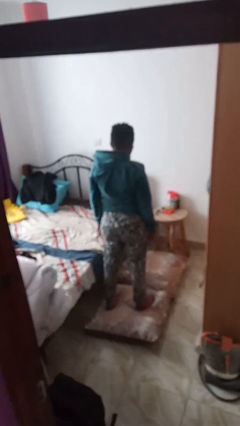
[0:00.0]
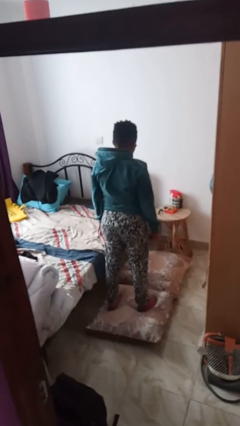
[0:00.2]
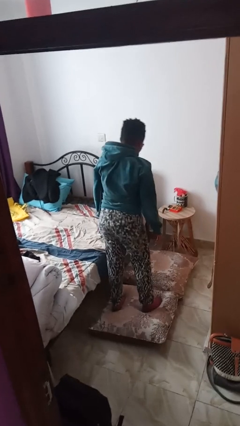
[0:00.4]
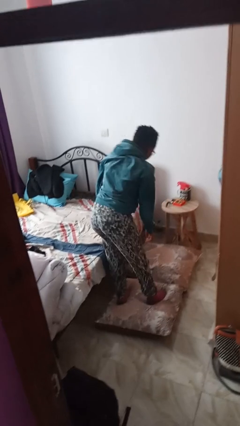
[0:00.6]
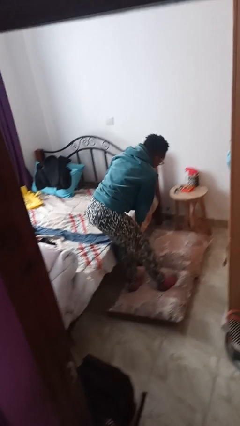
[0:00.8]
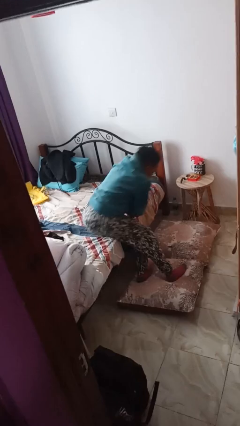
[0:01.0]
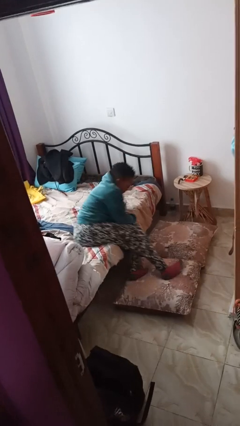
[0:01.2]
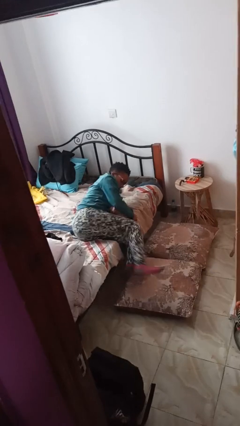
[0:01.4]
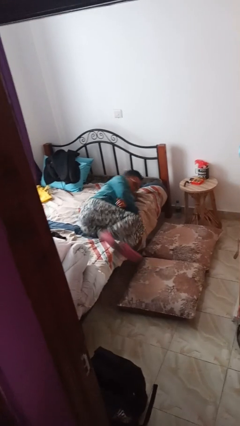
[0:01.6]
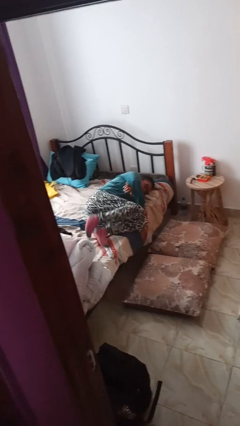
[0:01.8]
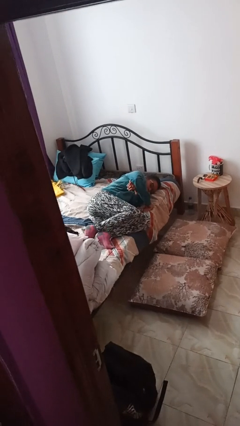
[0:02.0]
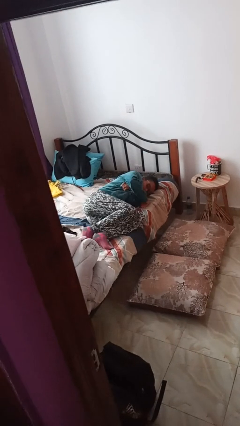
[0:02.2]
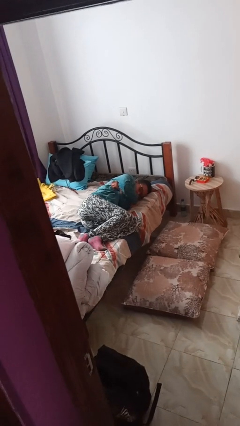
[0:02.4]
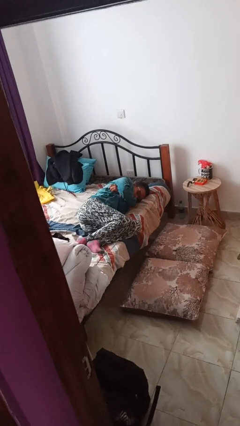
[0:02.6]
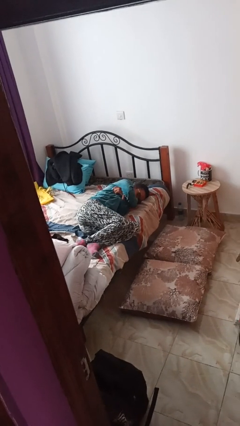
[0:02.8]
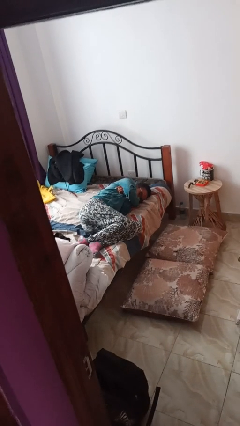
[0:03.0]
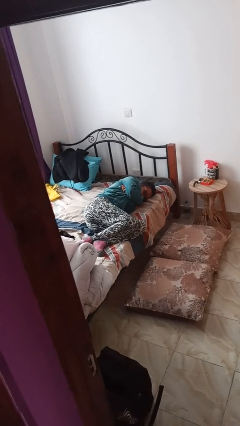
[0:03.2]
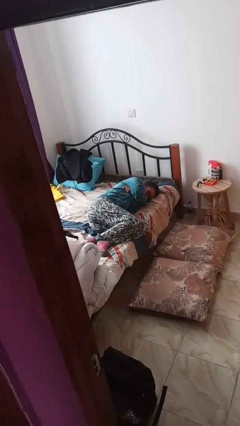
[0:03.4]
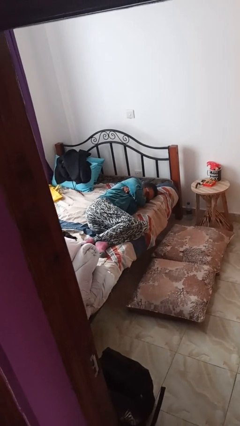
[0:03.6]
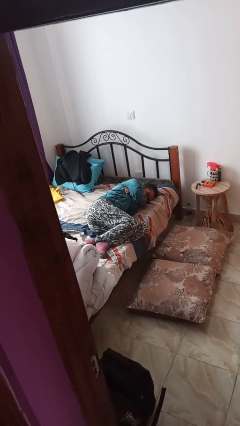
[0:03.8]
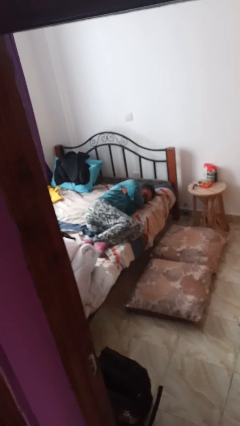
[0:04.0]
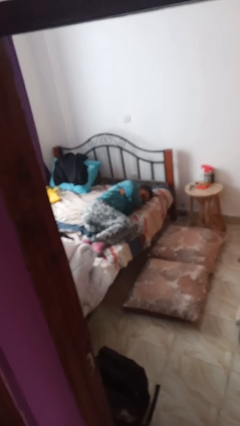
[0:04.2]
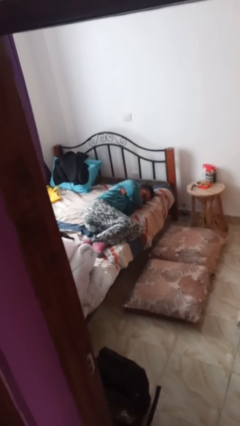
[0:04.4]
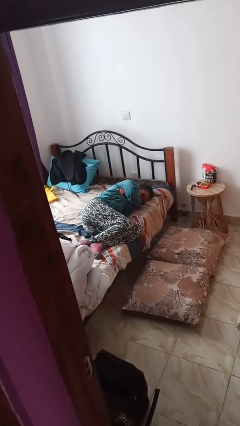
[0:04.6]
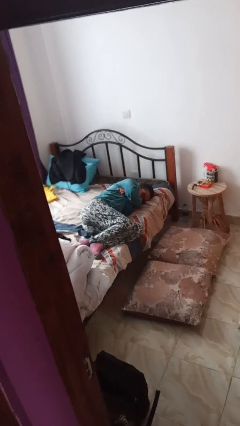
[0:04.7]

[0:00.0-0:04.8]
person lies down on bed

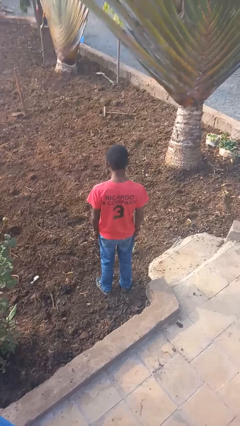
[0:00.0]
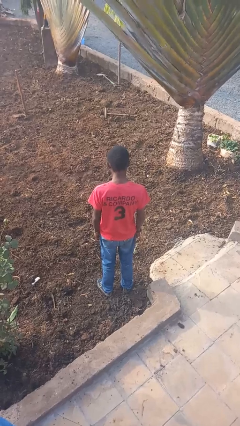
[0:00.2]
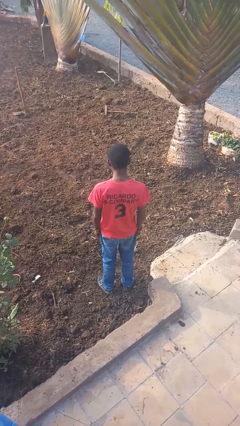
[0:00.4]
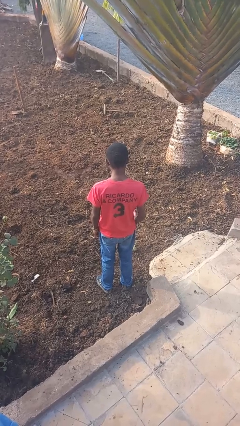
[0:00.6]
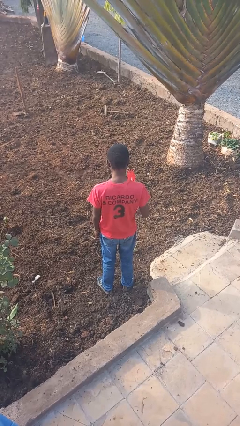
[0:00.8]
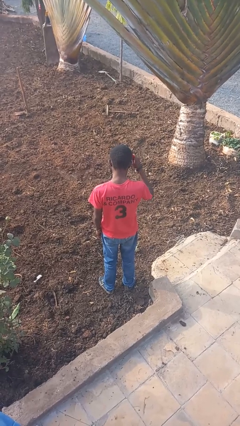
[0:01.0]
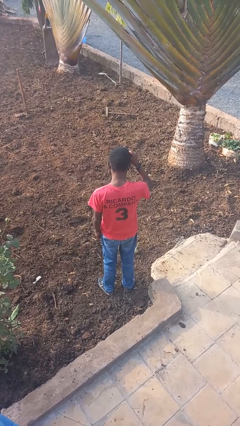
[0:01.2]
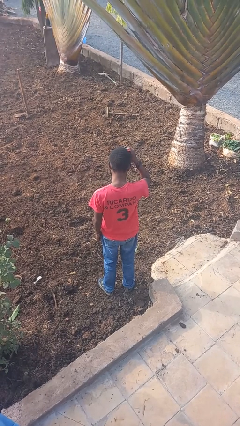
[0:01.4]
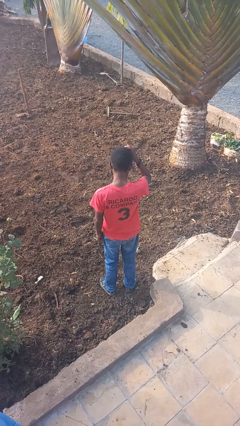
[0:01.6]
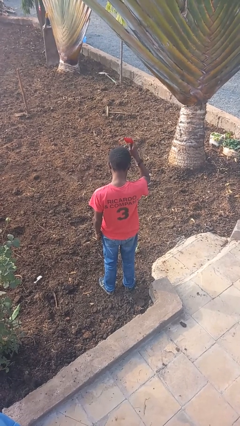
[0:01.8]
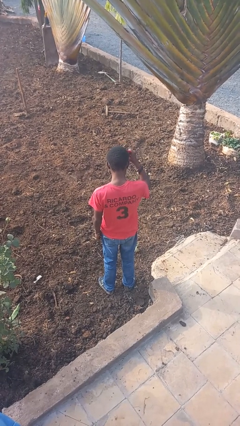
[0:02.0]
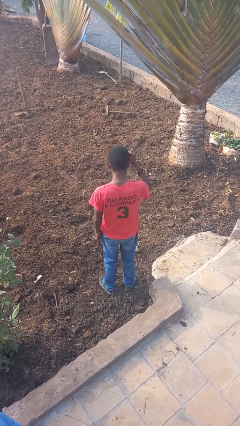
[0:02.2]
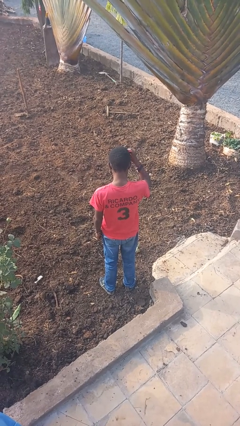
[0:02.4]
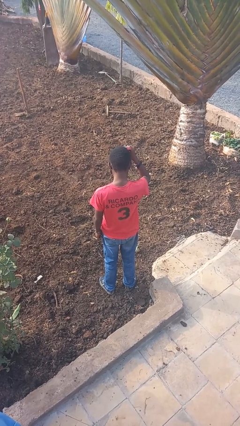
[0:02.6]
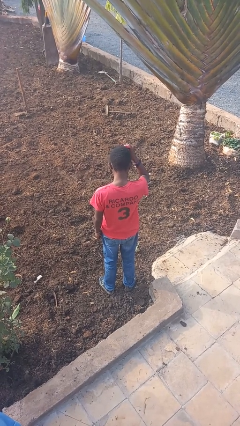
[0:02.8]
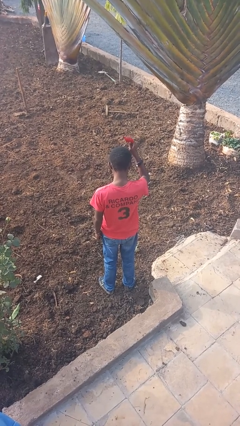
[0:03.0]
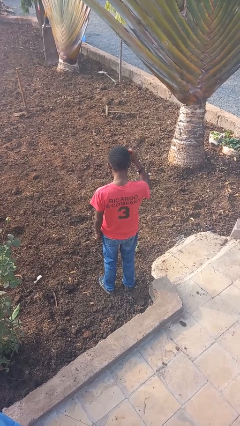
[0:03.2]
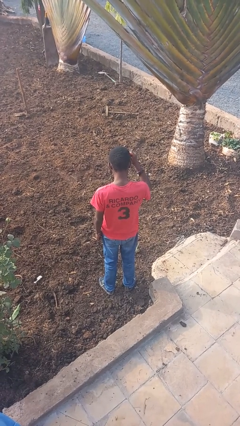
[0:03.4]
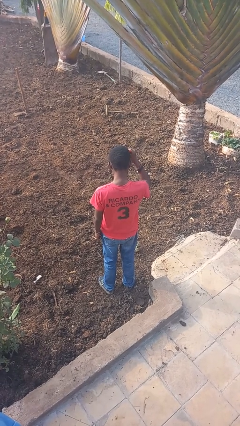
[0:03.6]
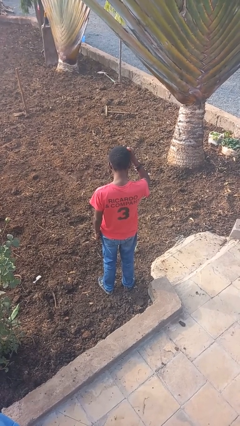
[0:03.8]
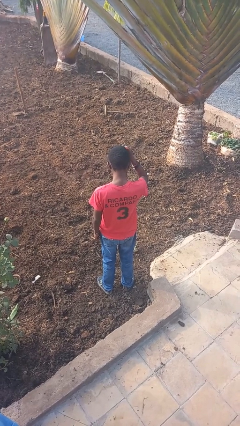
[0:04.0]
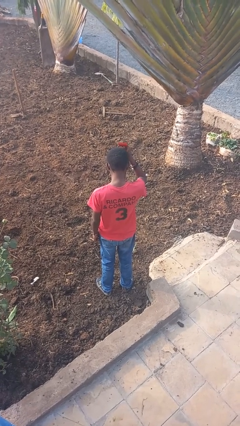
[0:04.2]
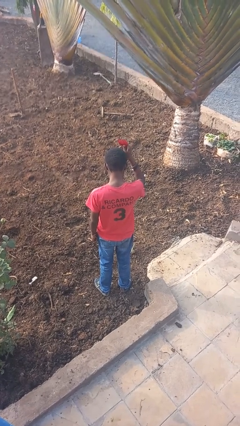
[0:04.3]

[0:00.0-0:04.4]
person brushes hair

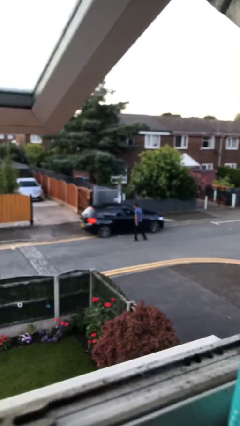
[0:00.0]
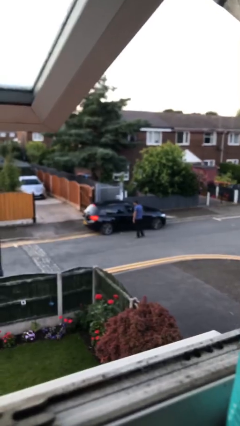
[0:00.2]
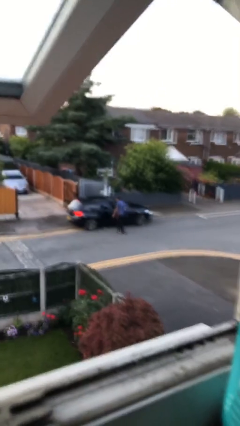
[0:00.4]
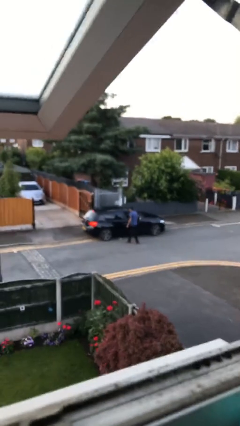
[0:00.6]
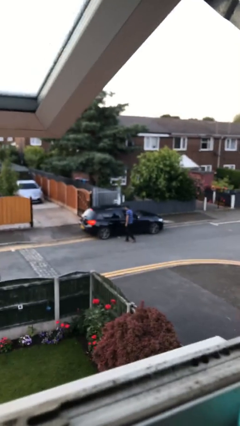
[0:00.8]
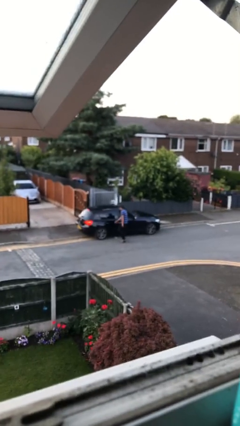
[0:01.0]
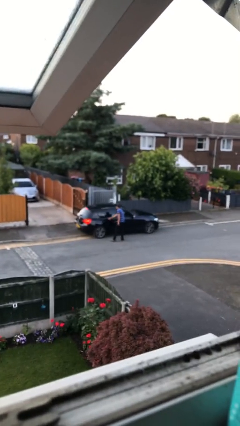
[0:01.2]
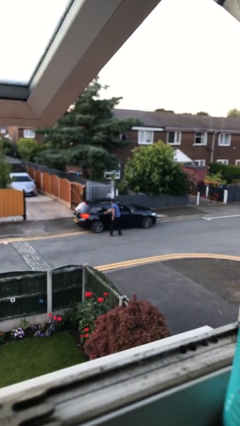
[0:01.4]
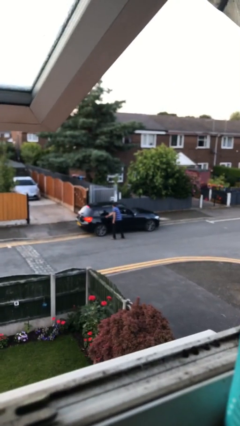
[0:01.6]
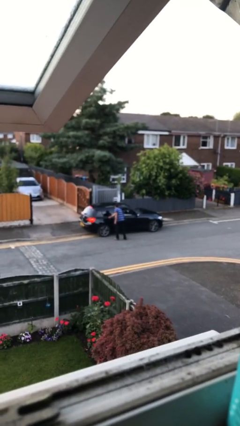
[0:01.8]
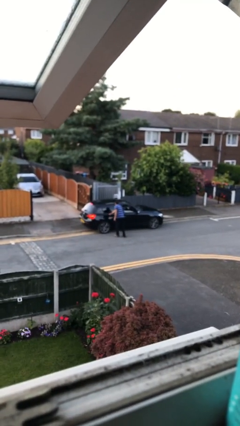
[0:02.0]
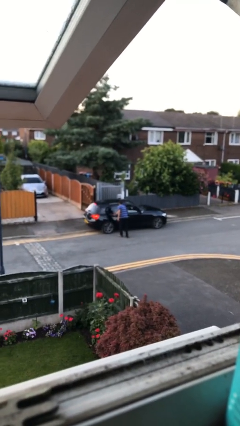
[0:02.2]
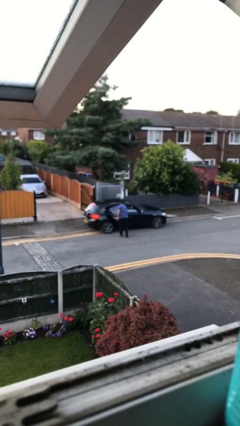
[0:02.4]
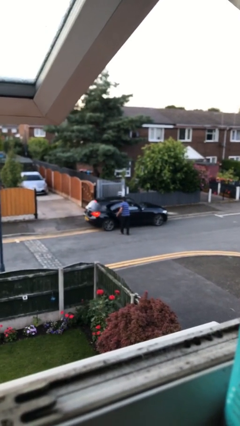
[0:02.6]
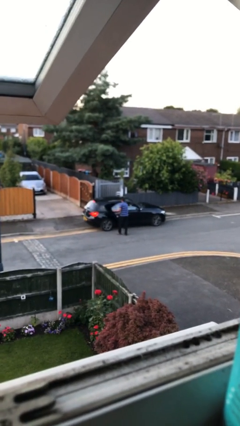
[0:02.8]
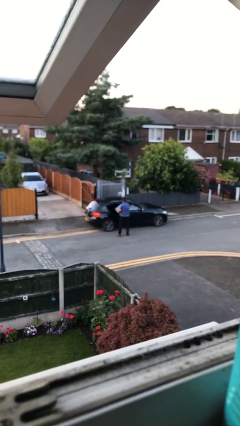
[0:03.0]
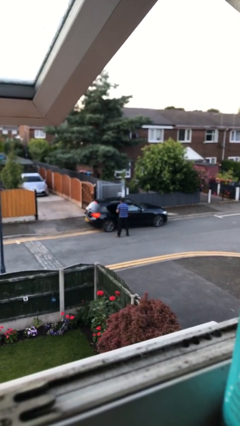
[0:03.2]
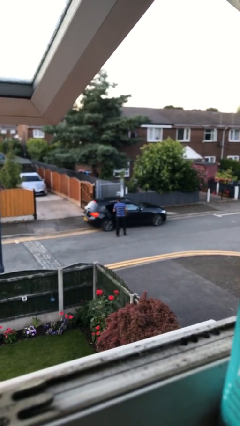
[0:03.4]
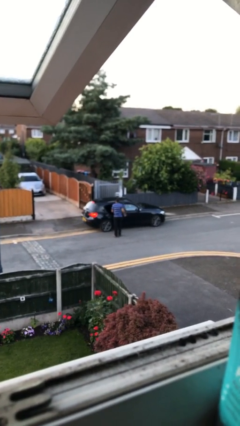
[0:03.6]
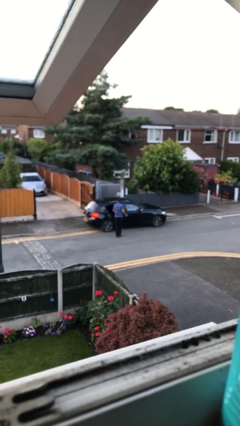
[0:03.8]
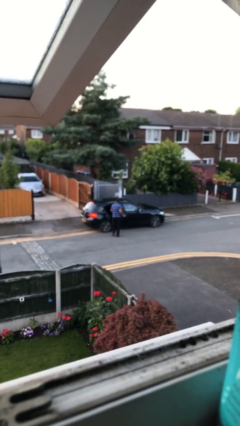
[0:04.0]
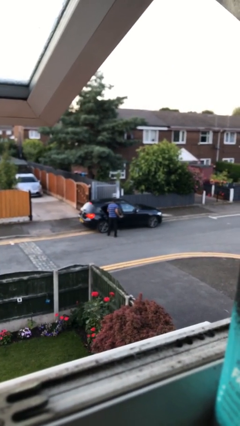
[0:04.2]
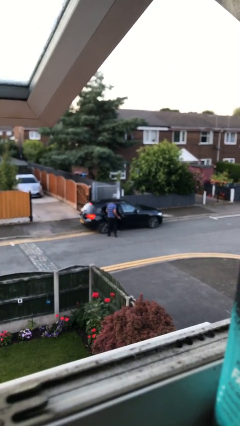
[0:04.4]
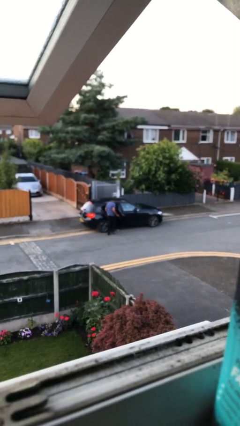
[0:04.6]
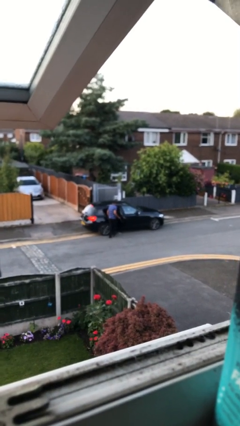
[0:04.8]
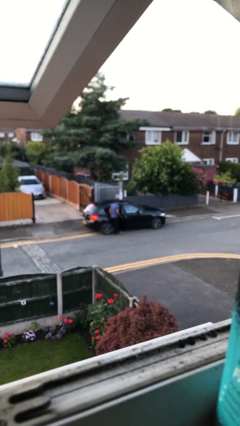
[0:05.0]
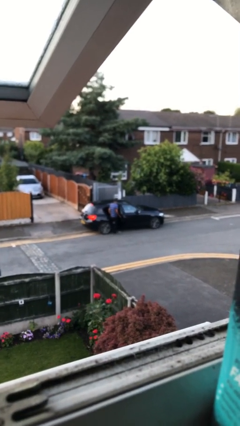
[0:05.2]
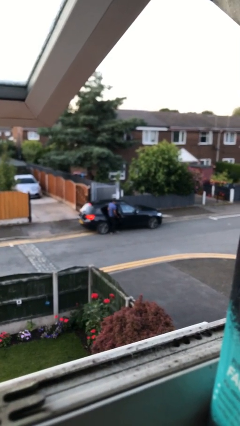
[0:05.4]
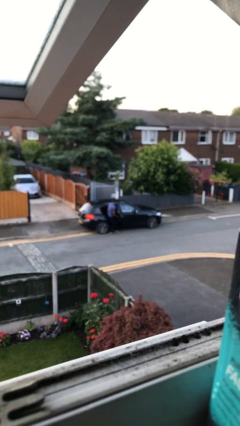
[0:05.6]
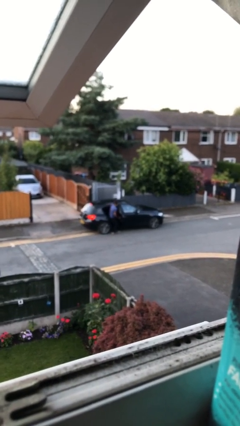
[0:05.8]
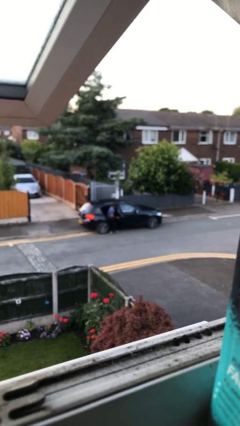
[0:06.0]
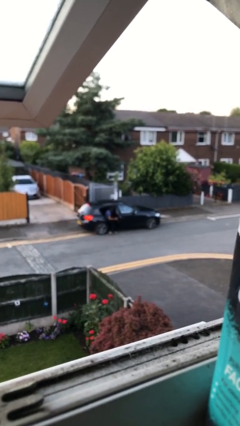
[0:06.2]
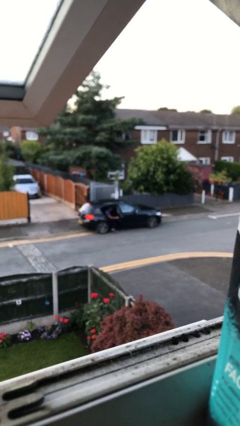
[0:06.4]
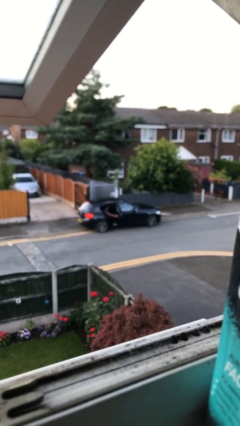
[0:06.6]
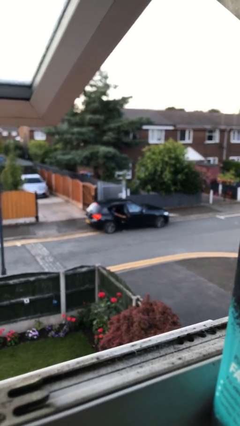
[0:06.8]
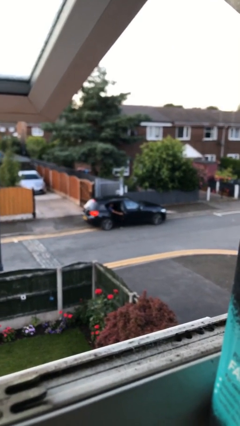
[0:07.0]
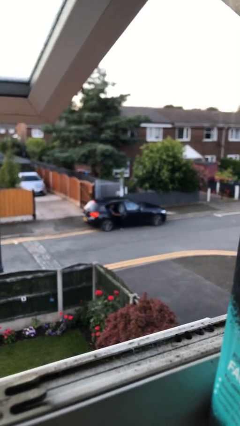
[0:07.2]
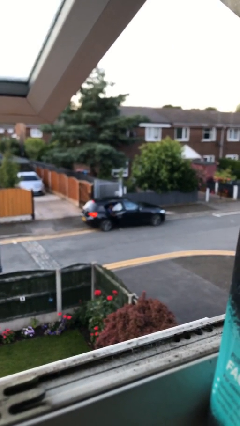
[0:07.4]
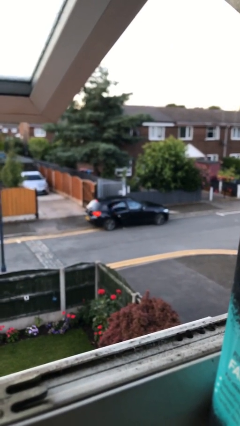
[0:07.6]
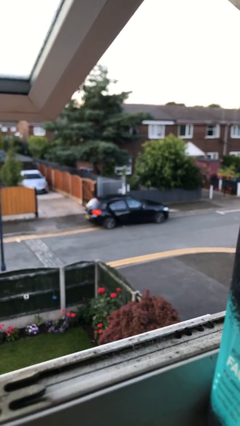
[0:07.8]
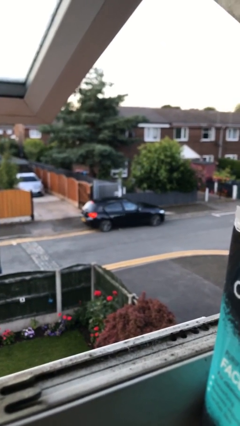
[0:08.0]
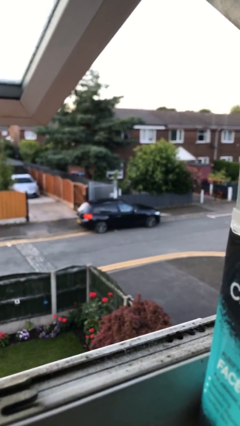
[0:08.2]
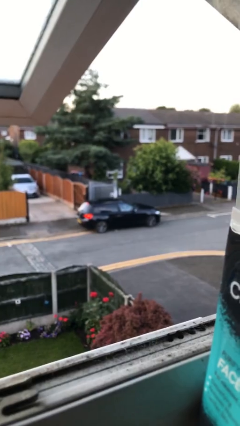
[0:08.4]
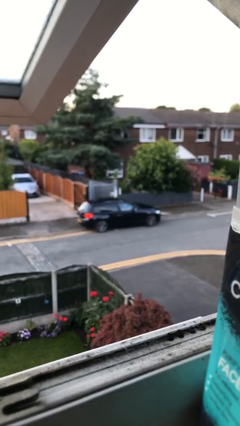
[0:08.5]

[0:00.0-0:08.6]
car picks up person

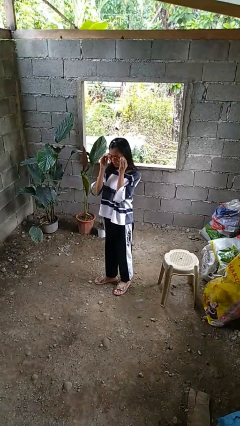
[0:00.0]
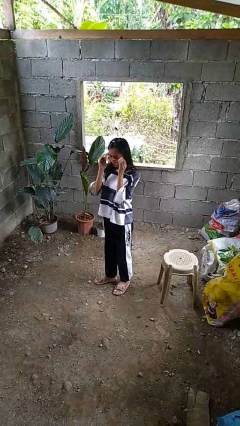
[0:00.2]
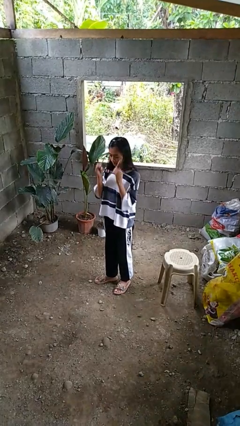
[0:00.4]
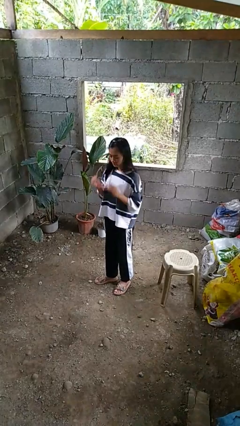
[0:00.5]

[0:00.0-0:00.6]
person takes off sunglasses
